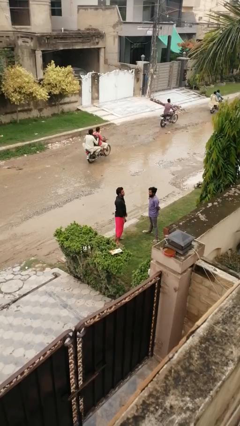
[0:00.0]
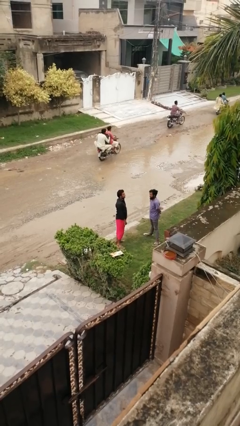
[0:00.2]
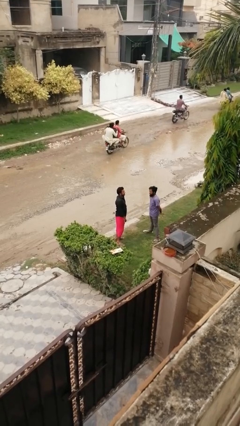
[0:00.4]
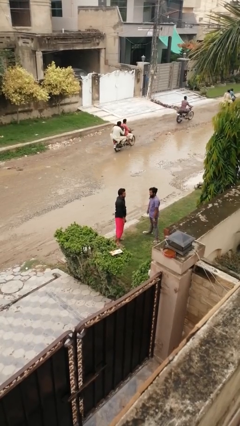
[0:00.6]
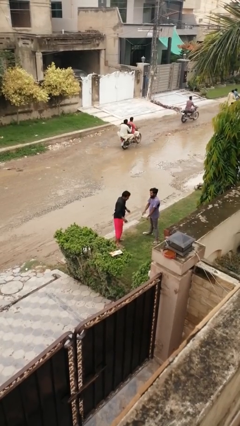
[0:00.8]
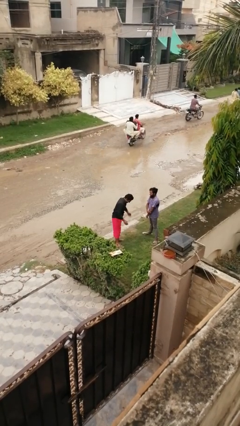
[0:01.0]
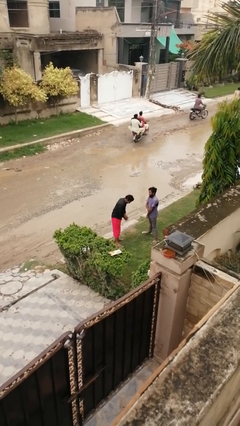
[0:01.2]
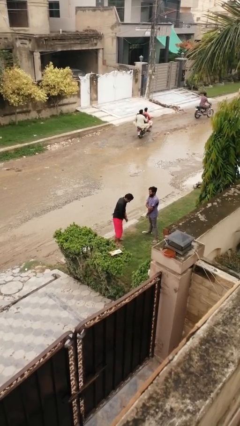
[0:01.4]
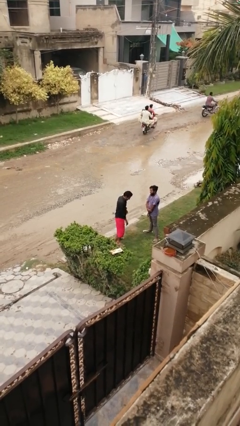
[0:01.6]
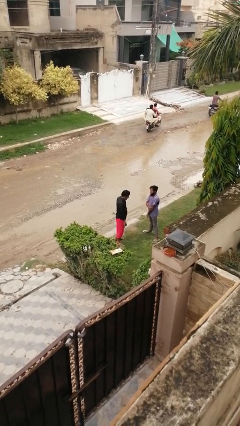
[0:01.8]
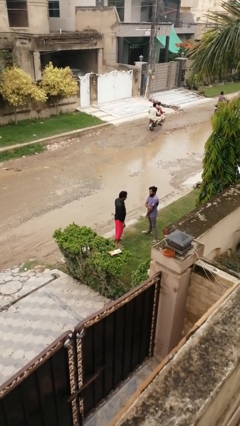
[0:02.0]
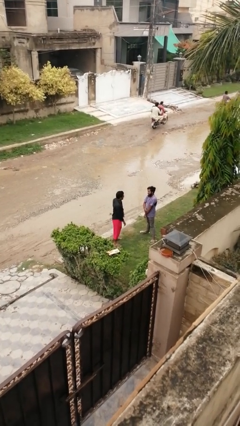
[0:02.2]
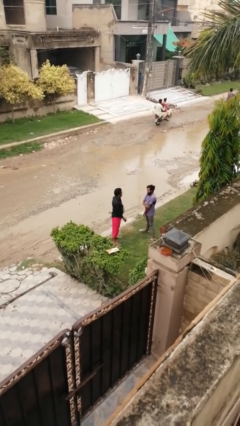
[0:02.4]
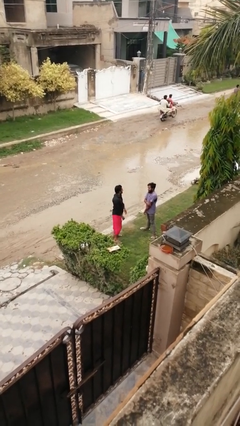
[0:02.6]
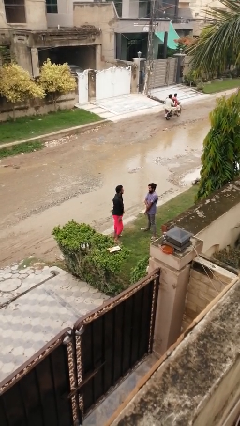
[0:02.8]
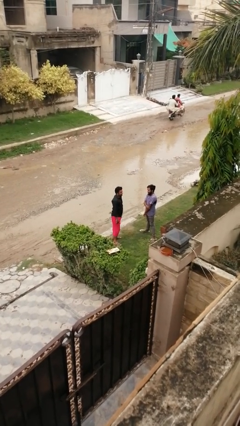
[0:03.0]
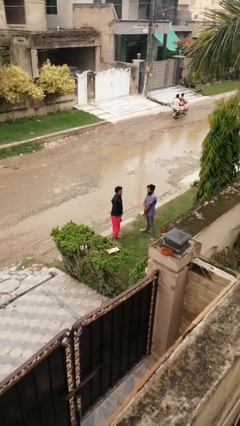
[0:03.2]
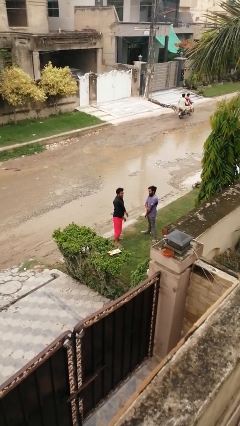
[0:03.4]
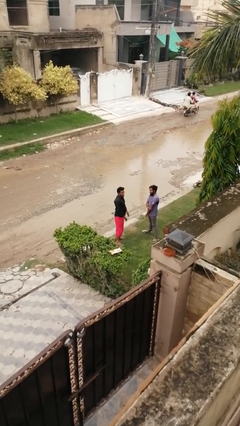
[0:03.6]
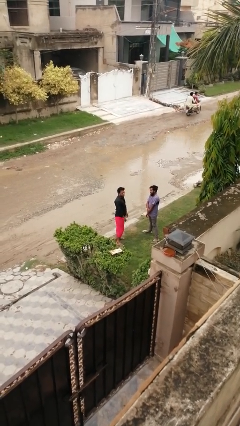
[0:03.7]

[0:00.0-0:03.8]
person laughs with person

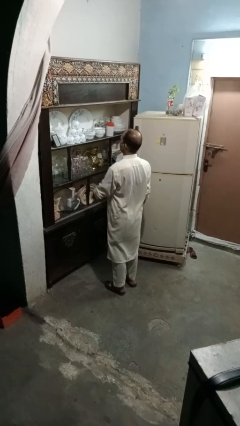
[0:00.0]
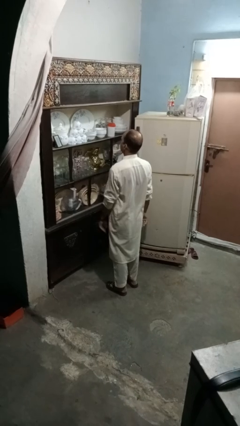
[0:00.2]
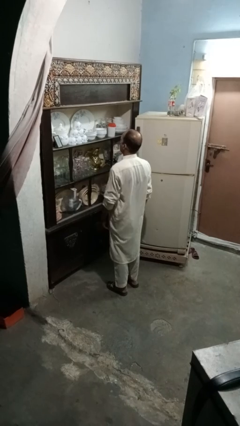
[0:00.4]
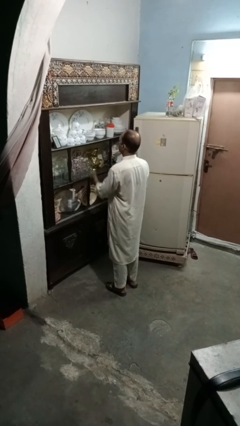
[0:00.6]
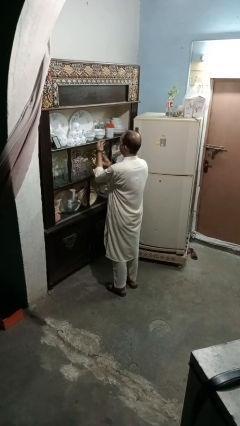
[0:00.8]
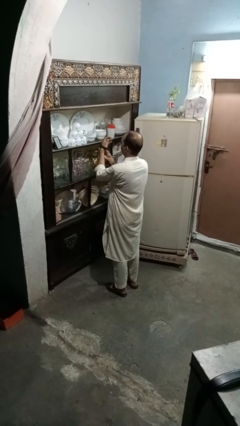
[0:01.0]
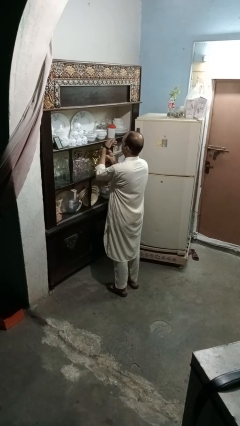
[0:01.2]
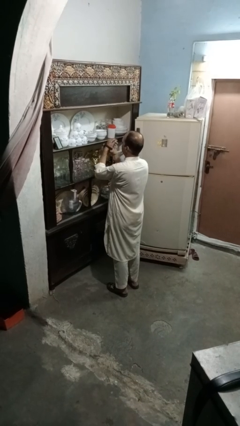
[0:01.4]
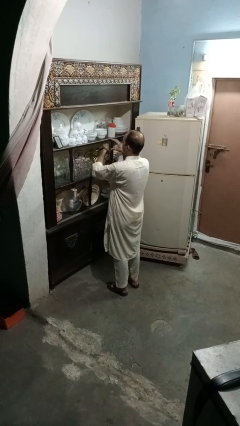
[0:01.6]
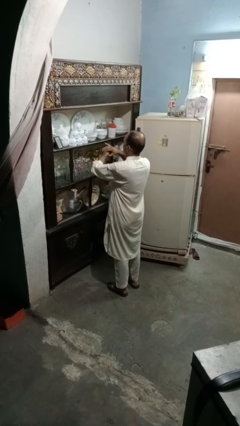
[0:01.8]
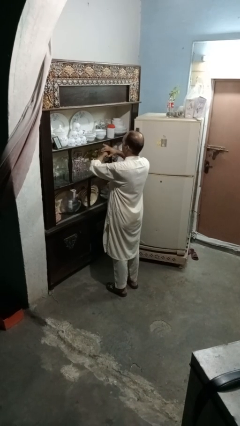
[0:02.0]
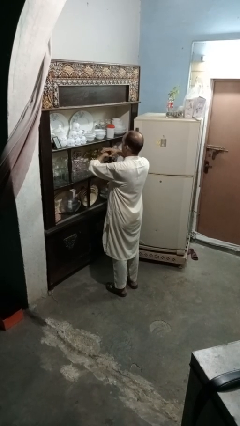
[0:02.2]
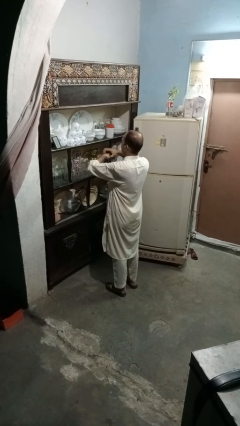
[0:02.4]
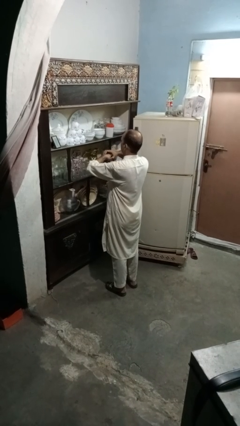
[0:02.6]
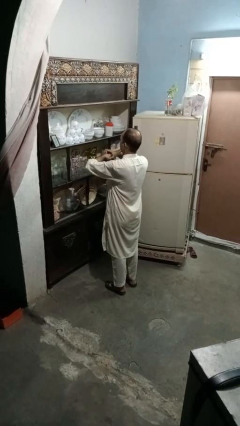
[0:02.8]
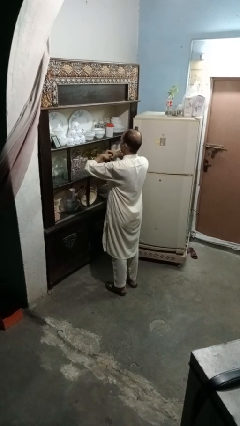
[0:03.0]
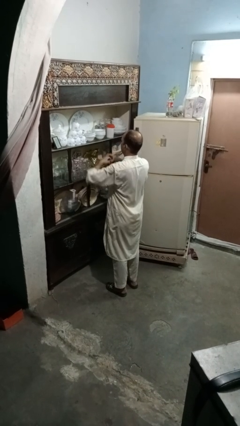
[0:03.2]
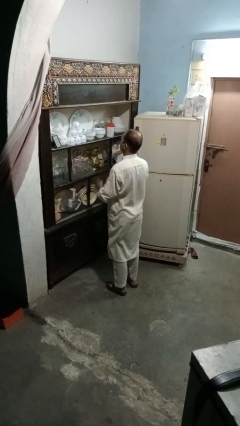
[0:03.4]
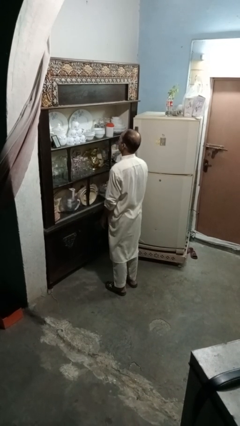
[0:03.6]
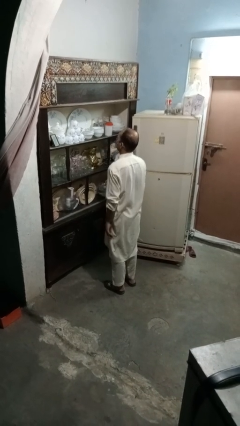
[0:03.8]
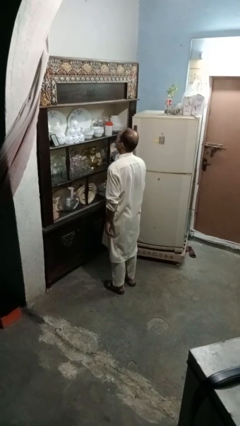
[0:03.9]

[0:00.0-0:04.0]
person takes off wristwatch

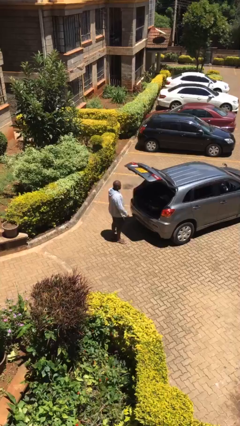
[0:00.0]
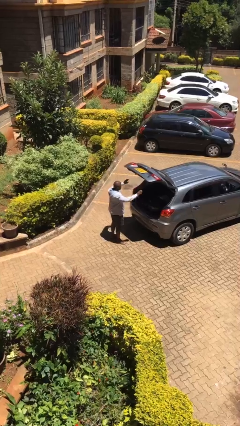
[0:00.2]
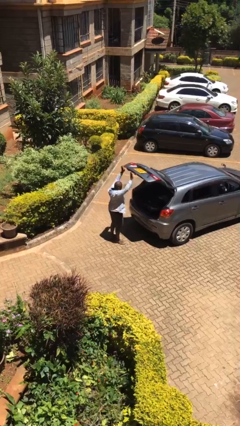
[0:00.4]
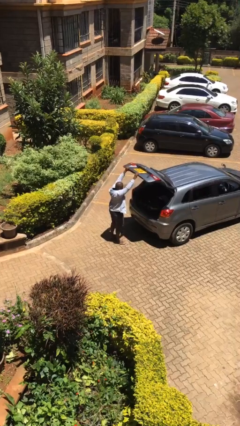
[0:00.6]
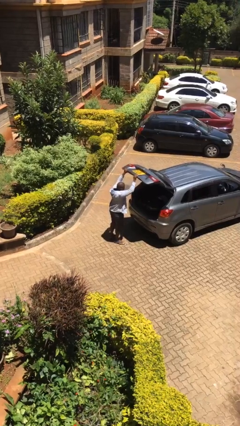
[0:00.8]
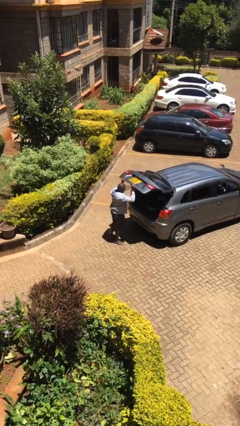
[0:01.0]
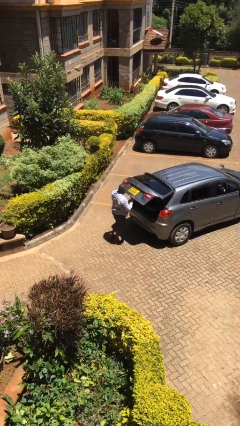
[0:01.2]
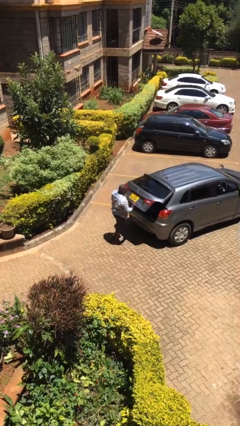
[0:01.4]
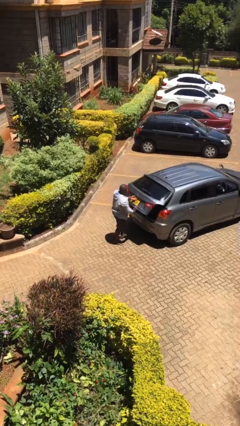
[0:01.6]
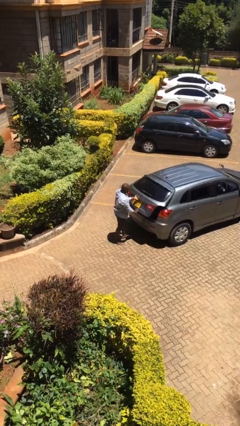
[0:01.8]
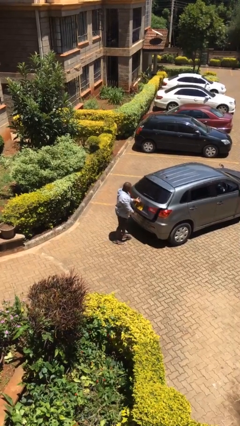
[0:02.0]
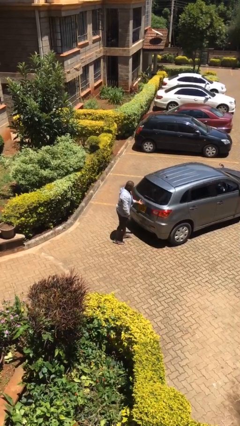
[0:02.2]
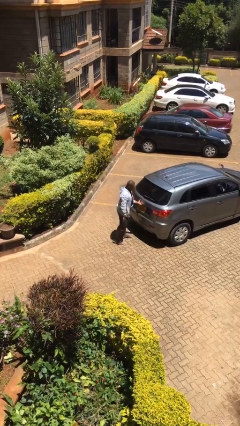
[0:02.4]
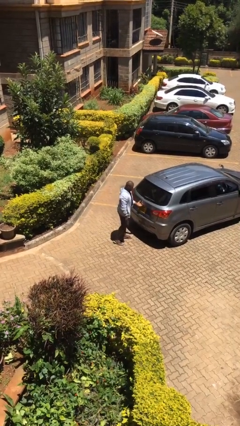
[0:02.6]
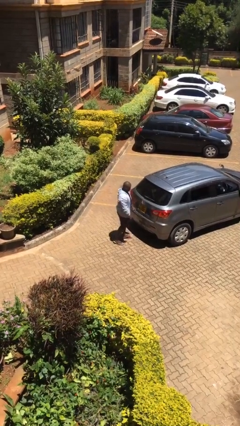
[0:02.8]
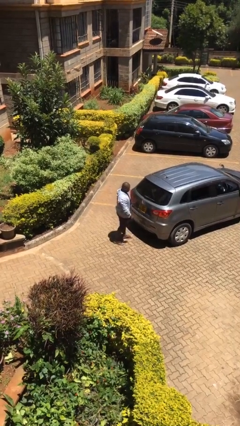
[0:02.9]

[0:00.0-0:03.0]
person closes car trunk

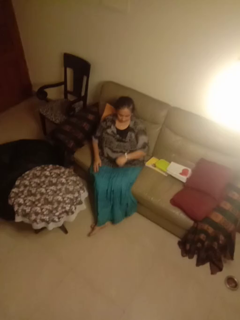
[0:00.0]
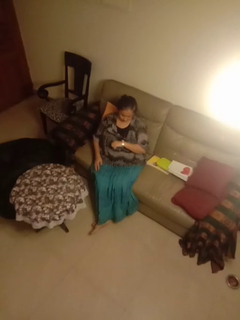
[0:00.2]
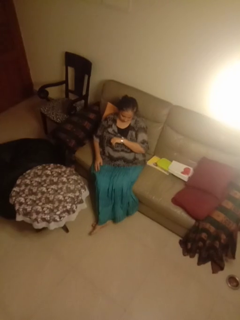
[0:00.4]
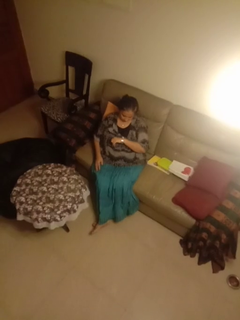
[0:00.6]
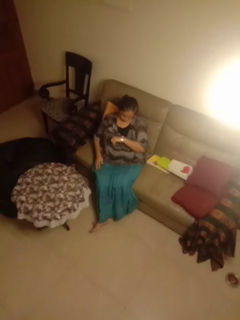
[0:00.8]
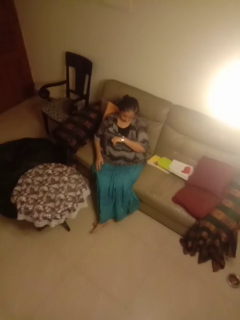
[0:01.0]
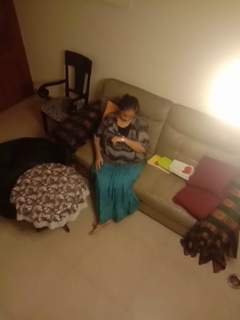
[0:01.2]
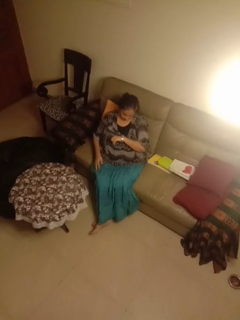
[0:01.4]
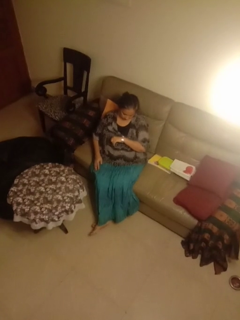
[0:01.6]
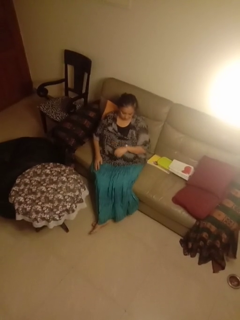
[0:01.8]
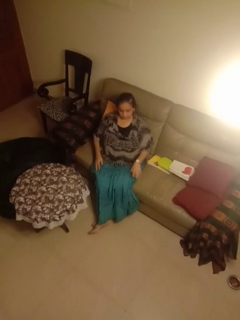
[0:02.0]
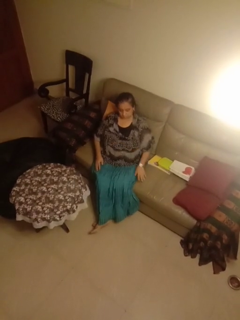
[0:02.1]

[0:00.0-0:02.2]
person looks at wristwatch

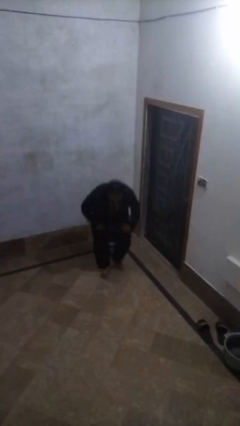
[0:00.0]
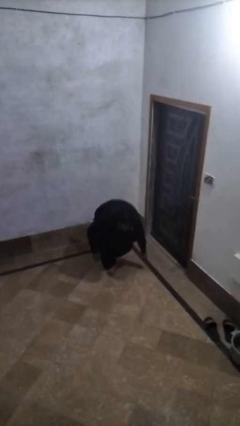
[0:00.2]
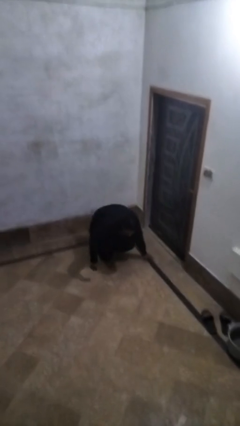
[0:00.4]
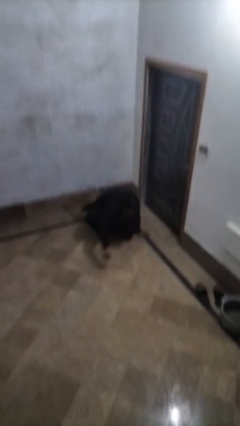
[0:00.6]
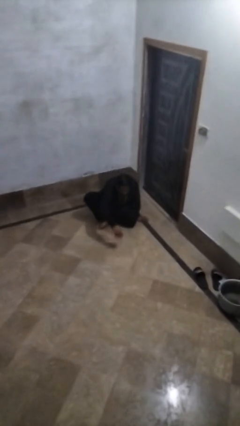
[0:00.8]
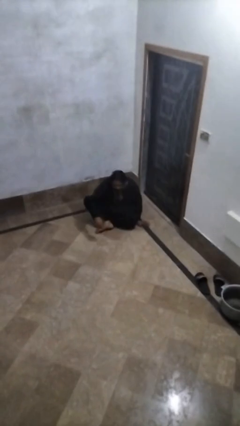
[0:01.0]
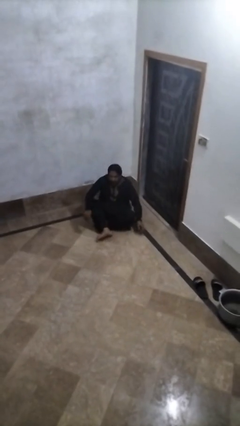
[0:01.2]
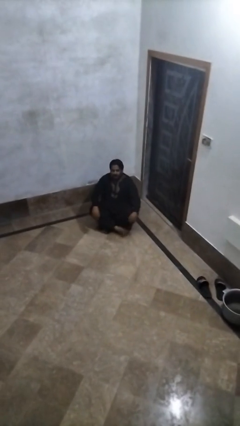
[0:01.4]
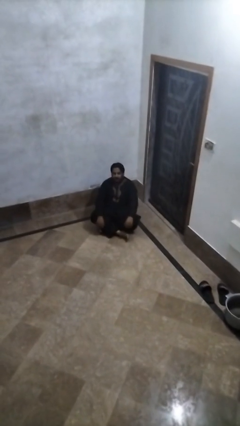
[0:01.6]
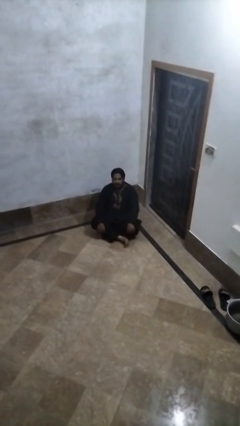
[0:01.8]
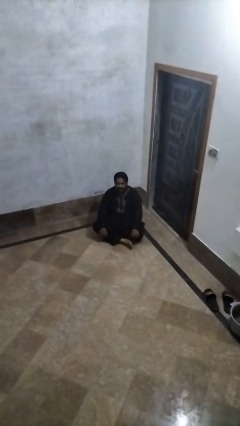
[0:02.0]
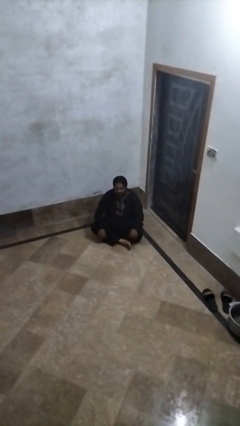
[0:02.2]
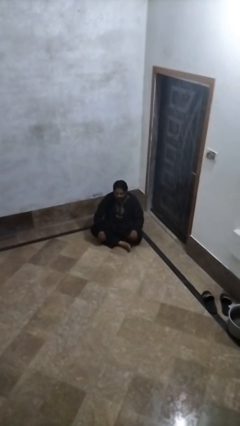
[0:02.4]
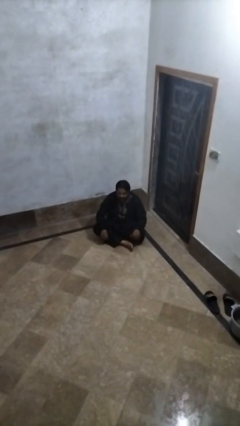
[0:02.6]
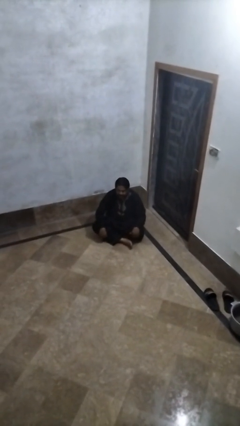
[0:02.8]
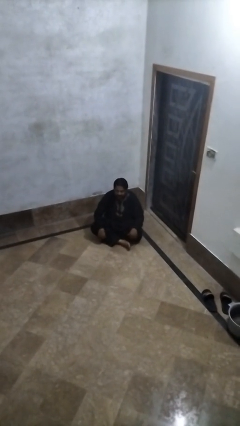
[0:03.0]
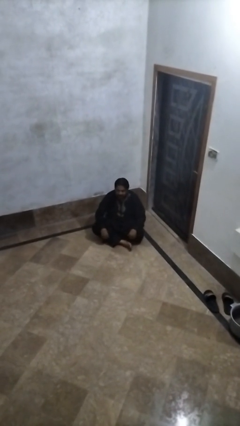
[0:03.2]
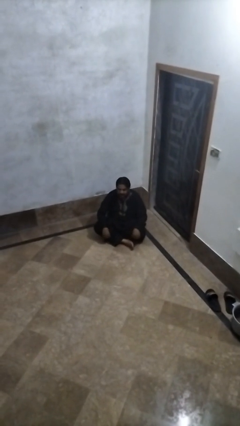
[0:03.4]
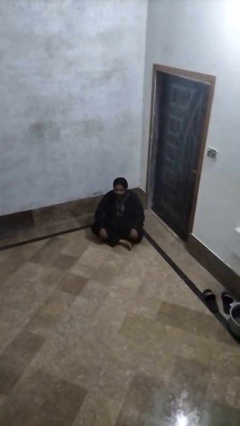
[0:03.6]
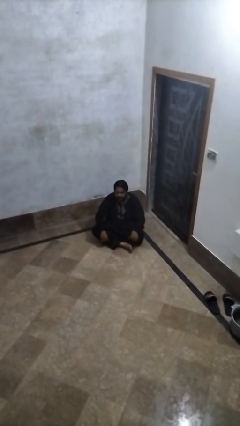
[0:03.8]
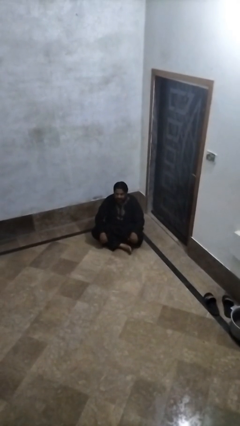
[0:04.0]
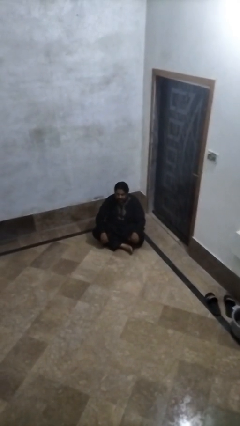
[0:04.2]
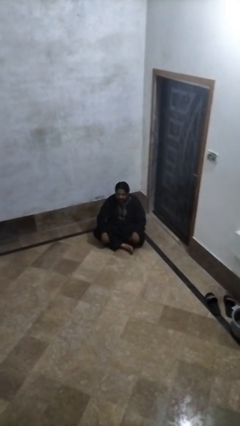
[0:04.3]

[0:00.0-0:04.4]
person sits crisscross

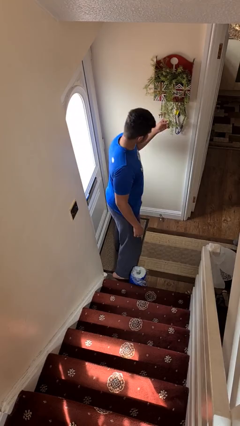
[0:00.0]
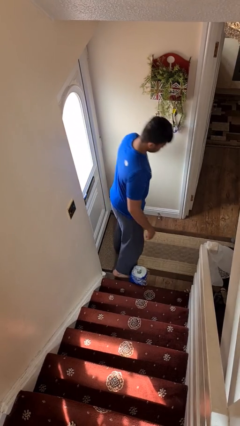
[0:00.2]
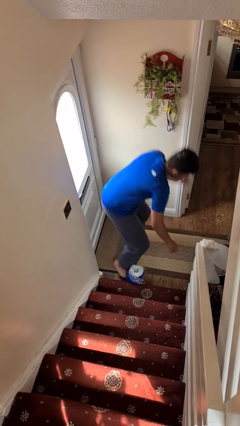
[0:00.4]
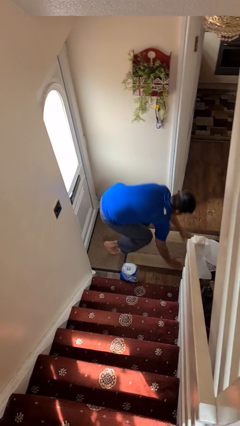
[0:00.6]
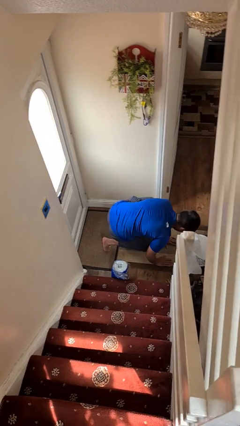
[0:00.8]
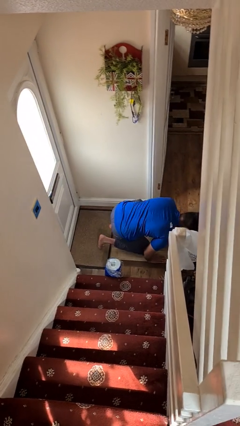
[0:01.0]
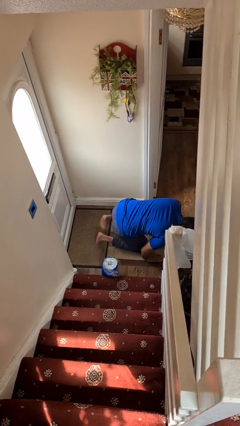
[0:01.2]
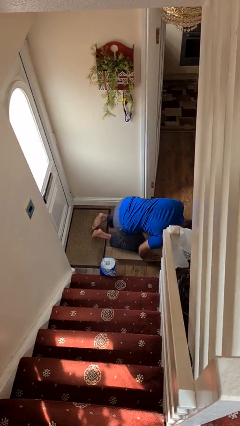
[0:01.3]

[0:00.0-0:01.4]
person trips on object on floor
